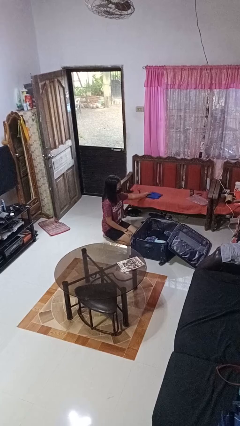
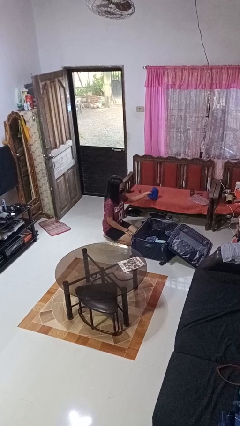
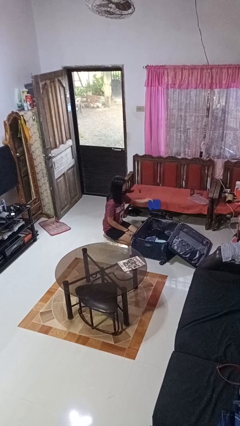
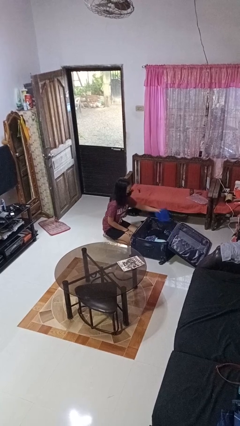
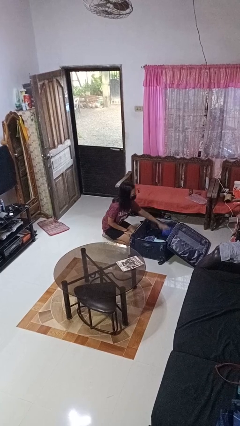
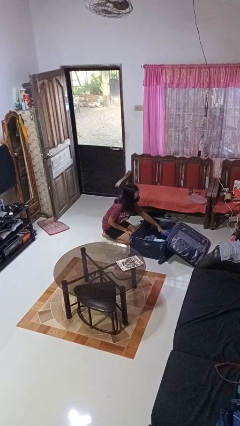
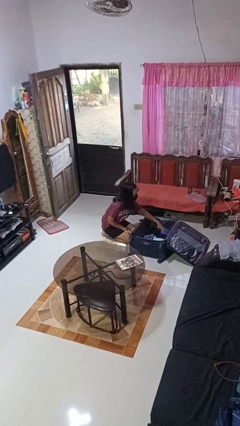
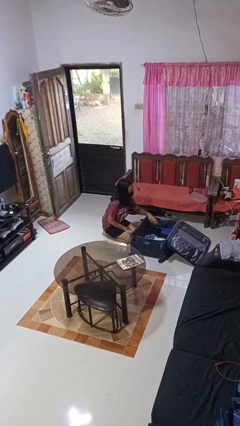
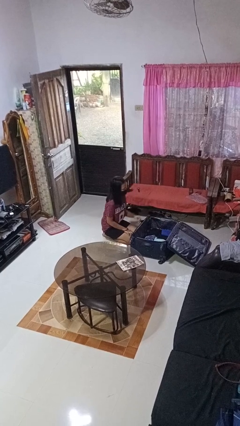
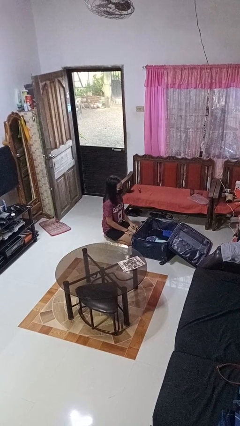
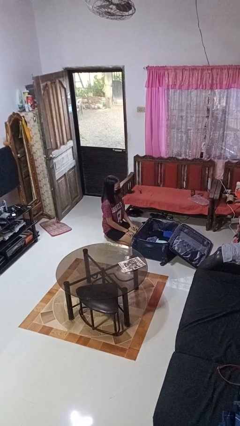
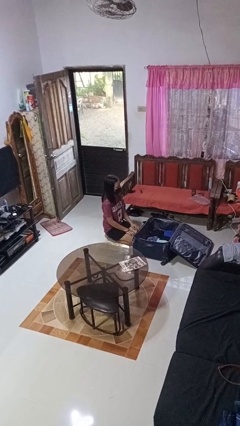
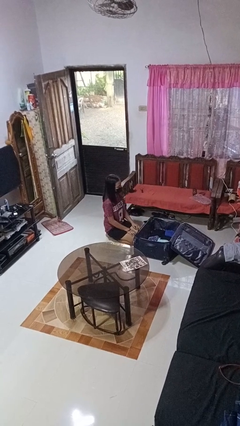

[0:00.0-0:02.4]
person loads clothes into suitcase

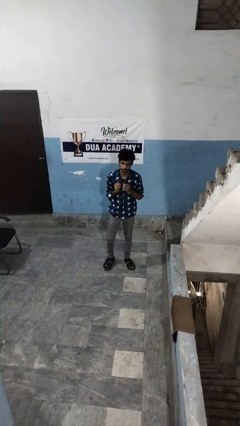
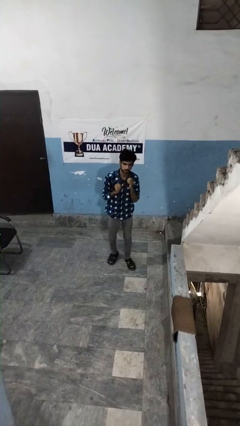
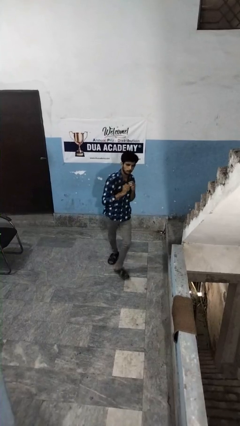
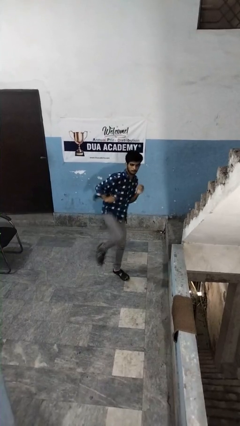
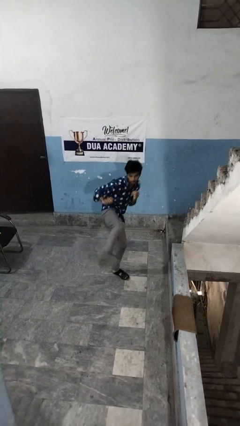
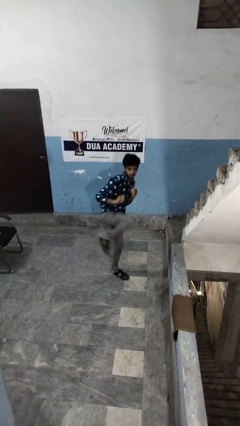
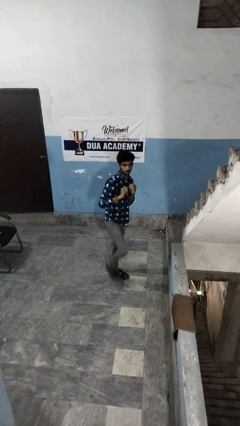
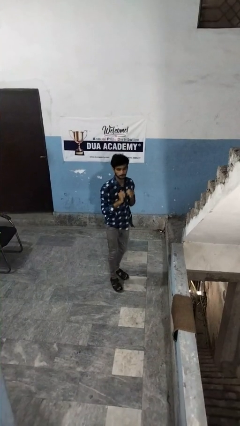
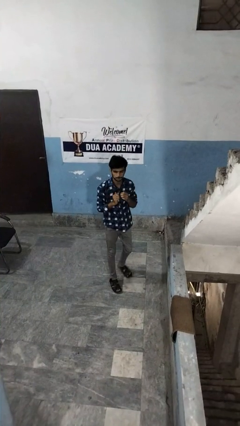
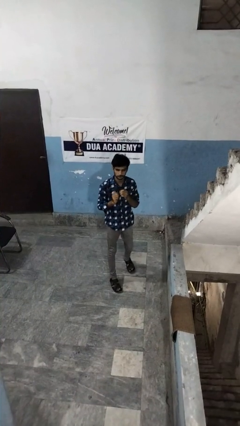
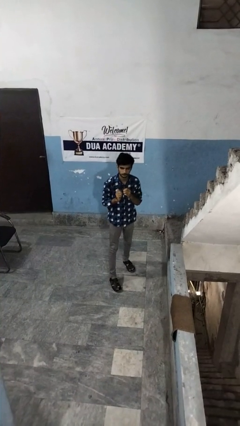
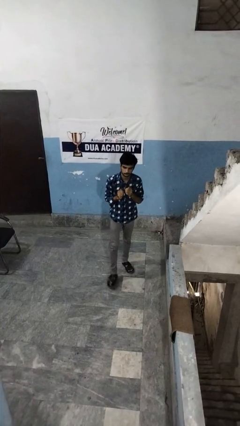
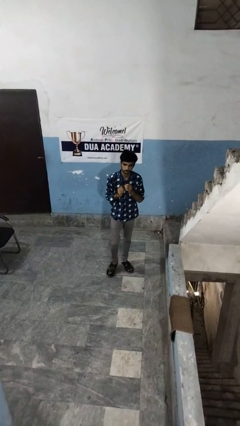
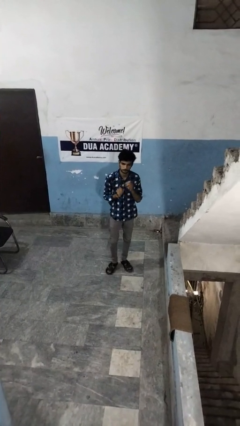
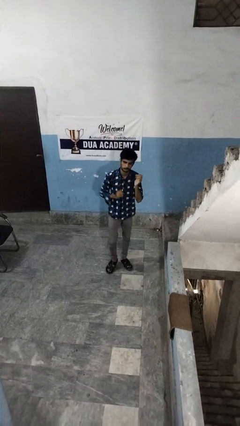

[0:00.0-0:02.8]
person karate kicks

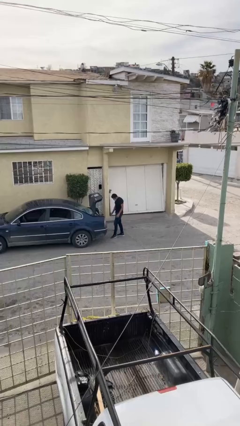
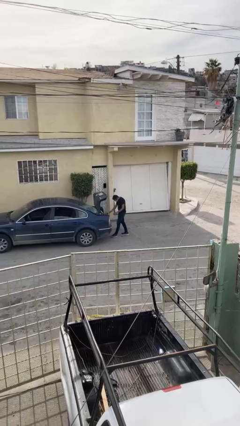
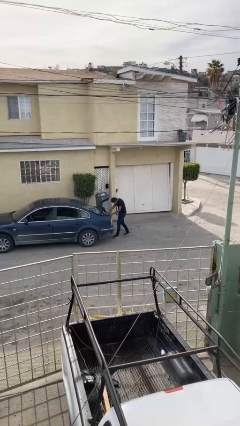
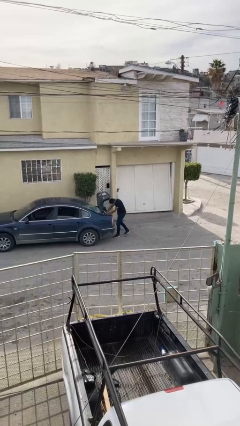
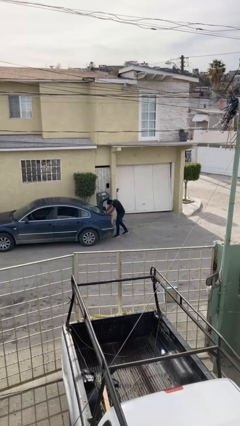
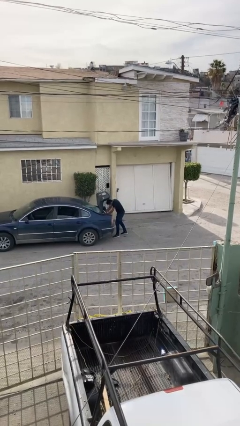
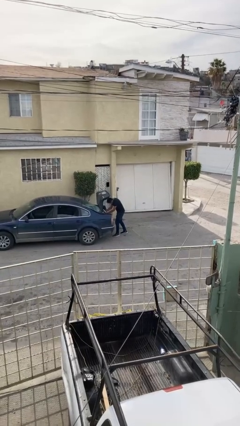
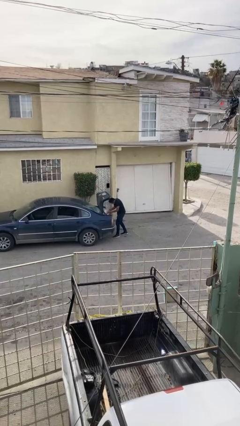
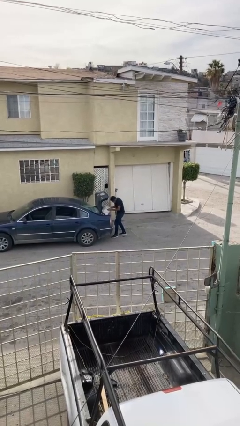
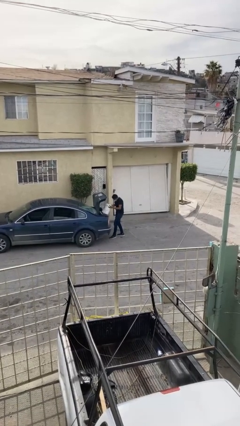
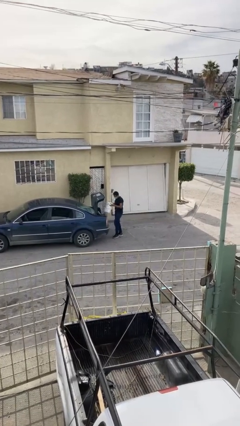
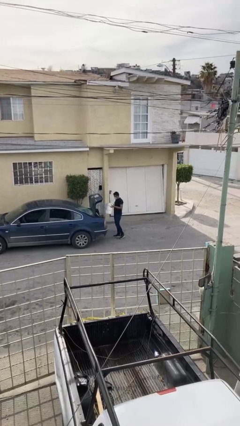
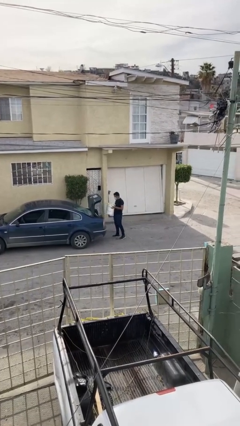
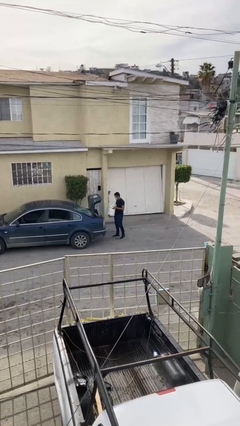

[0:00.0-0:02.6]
person unloads car

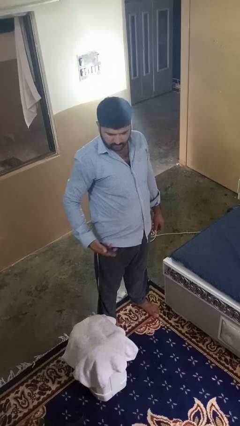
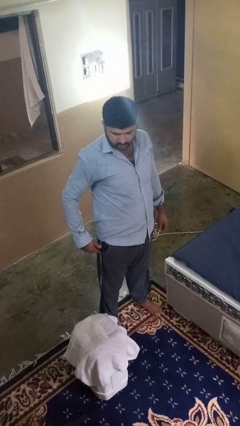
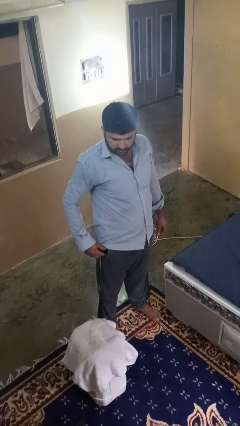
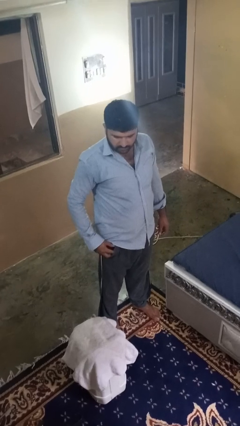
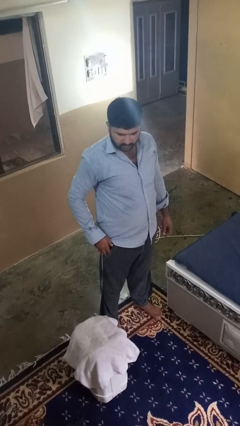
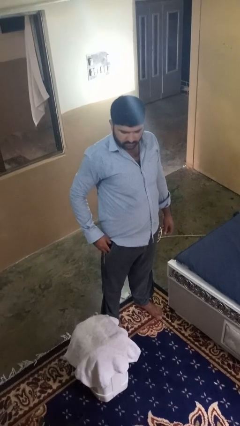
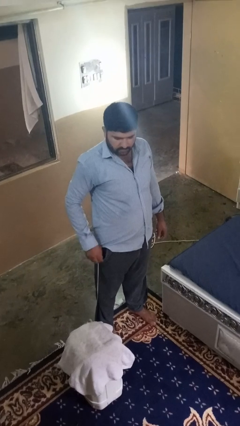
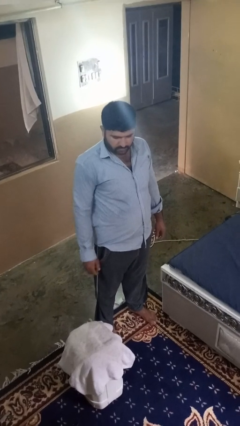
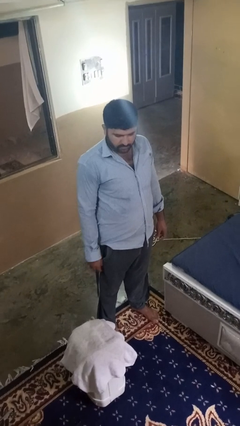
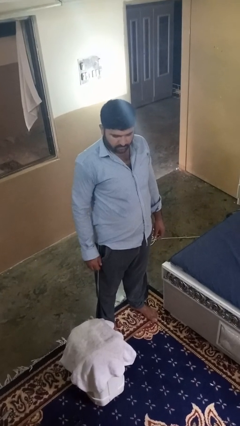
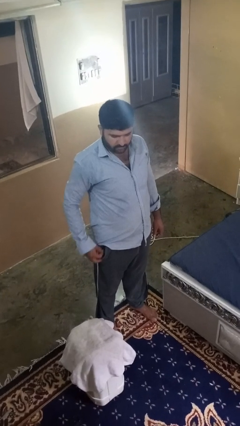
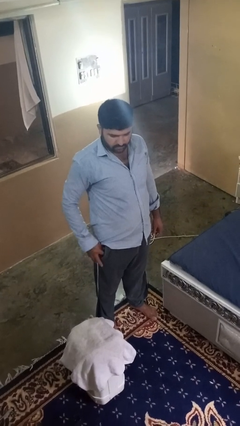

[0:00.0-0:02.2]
person puts phone into pocket

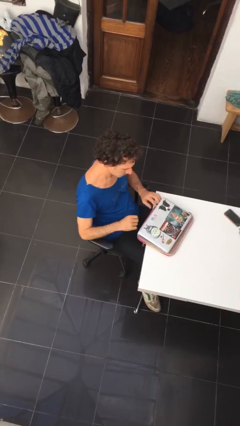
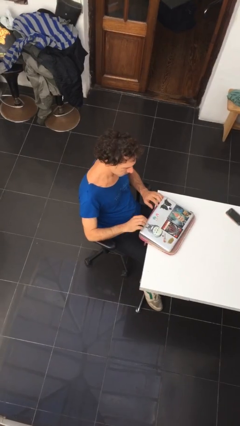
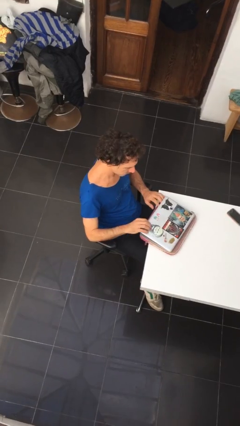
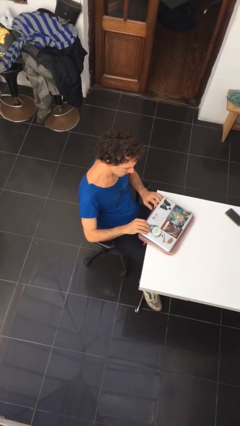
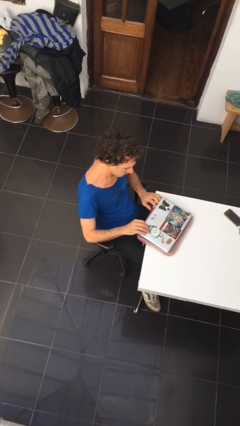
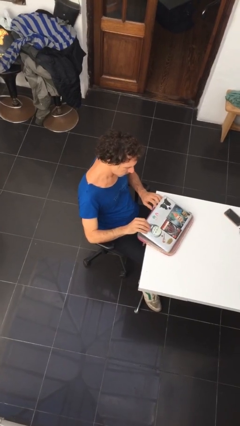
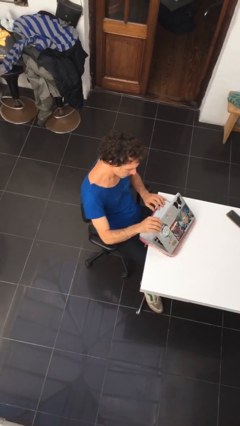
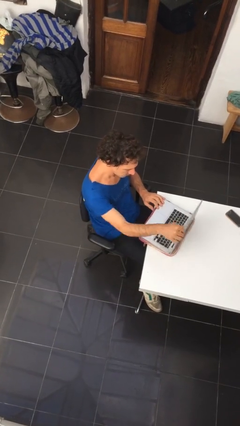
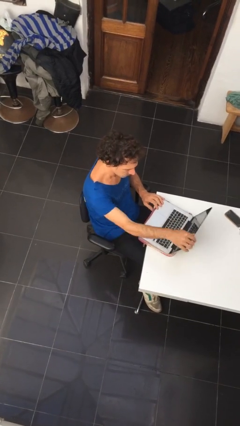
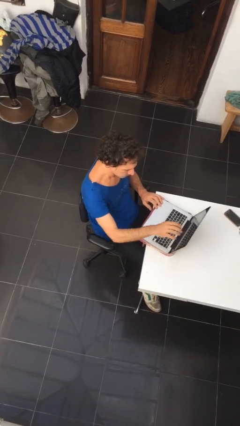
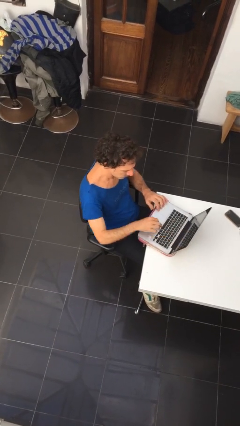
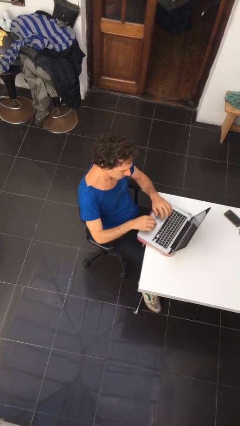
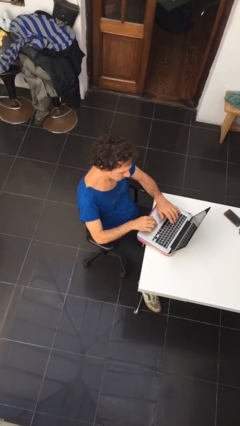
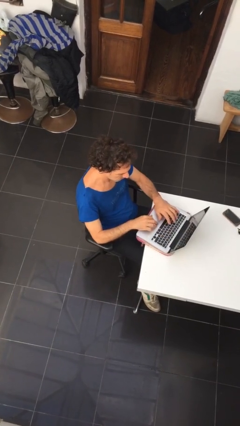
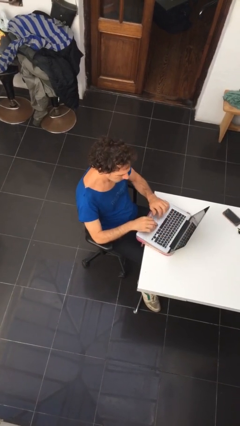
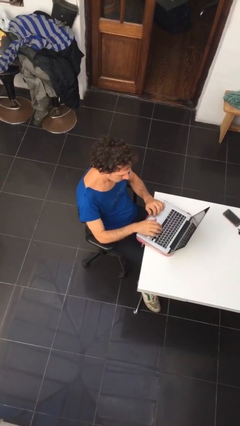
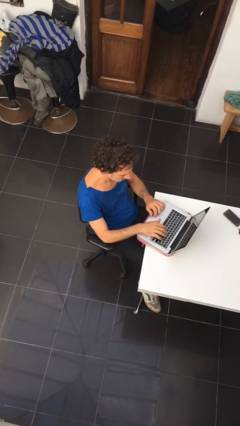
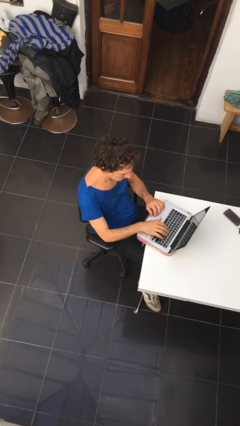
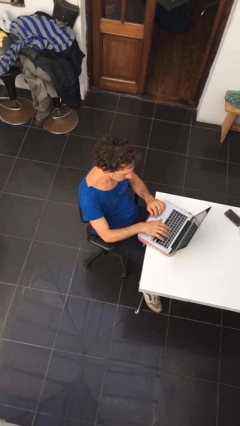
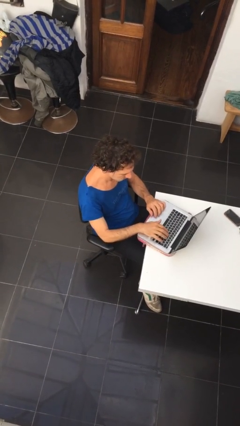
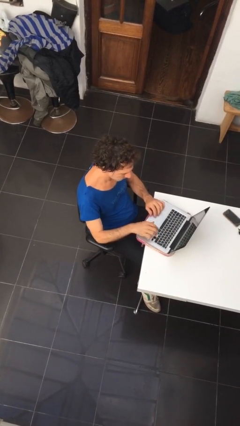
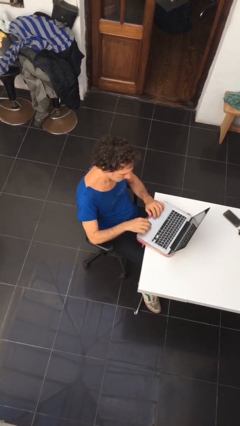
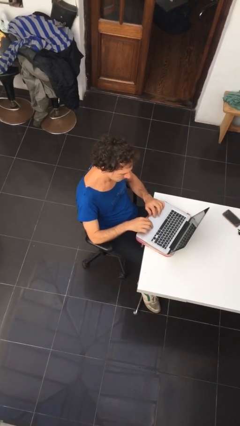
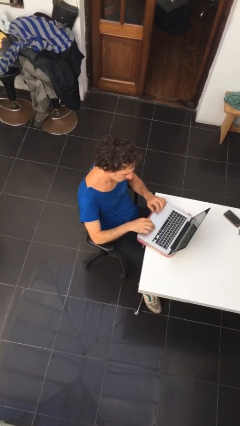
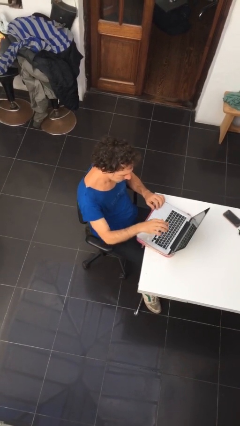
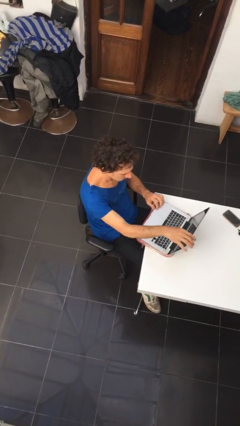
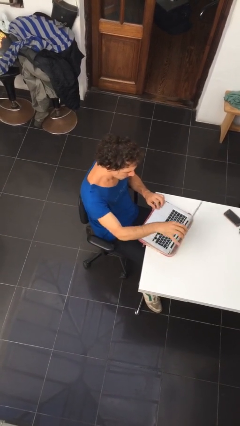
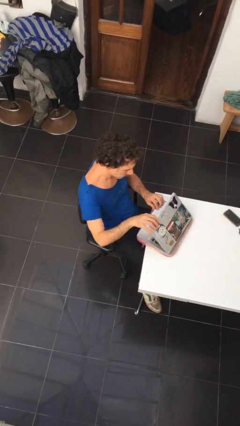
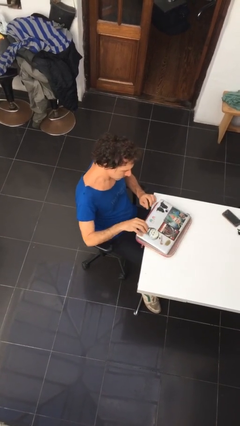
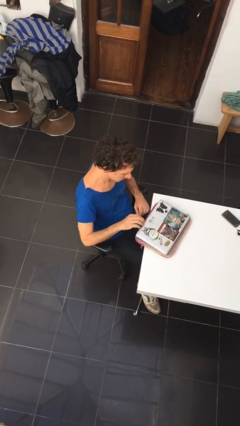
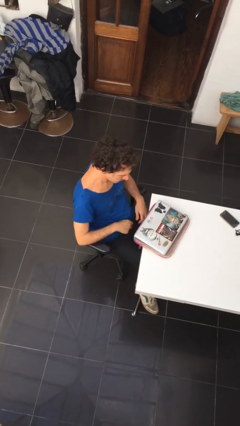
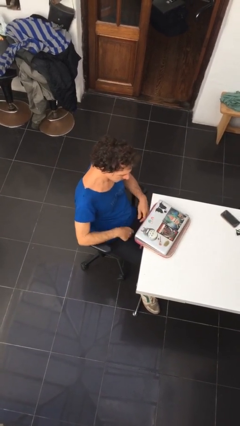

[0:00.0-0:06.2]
person interacts with laptop

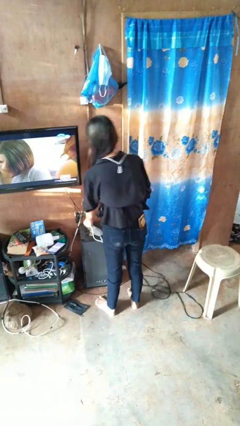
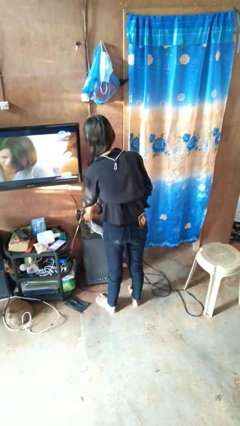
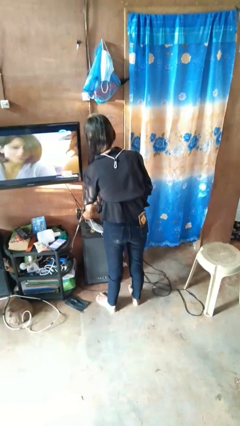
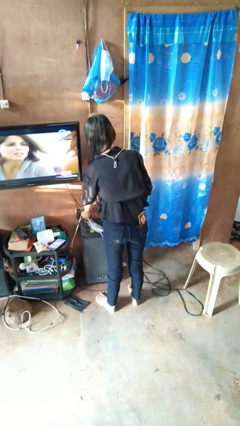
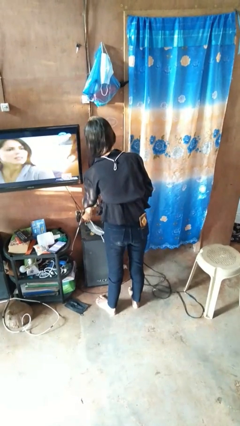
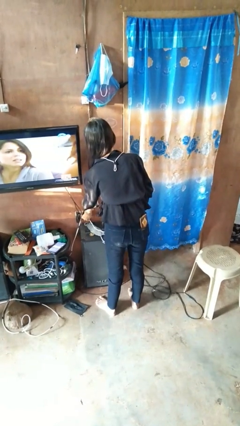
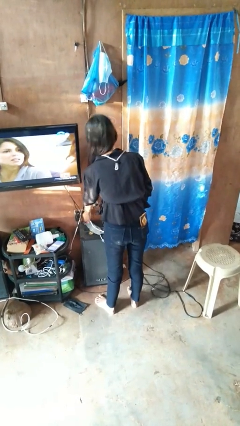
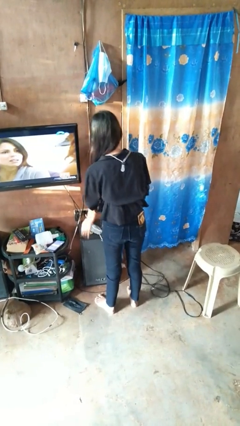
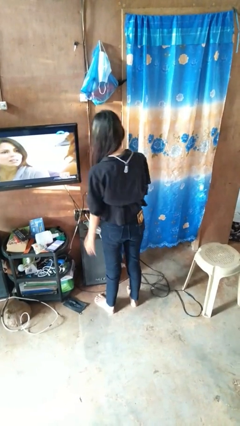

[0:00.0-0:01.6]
person plugs into electrical socket
